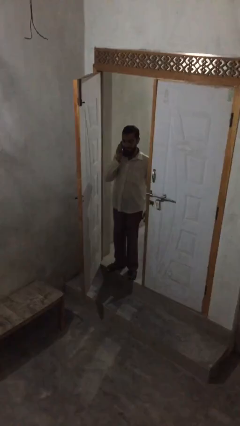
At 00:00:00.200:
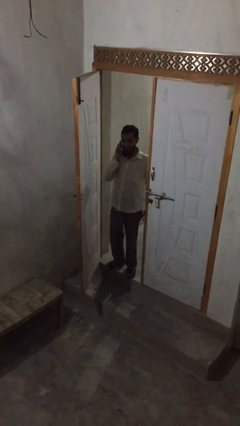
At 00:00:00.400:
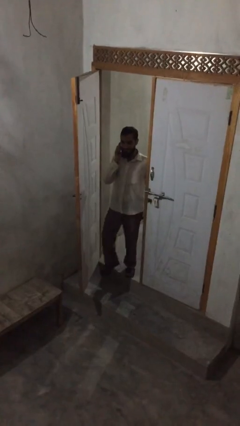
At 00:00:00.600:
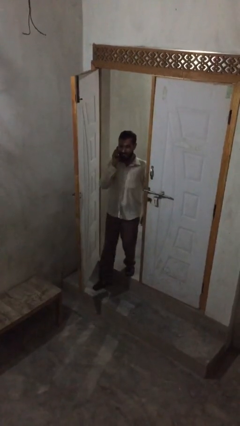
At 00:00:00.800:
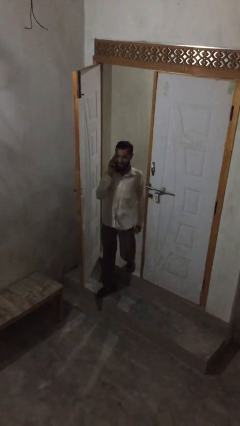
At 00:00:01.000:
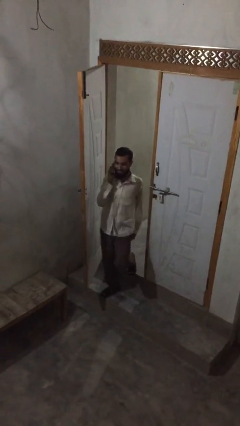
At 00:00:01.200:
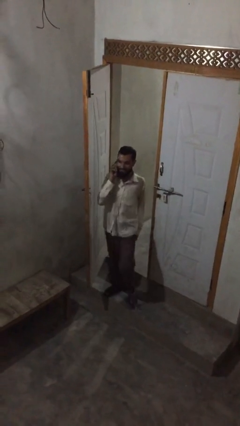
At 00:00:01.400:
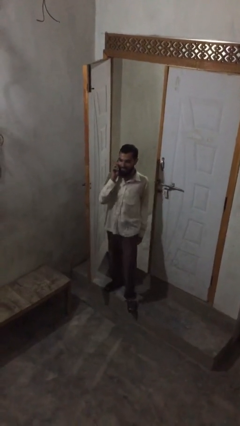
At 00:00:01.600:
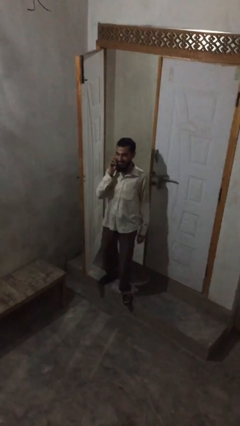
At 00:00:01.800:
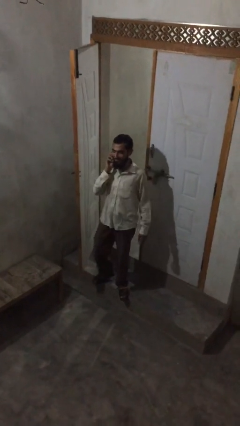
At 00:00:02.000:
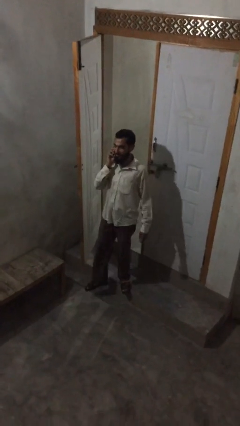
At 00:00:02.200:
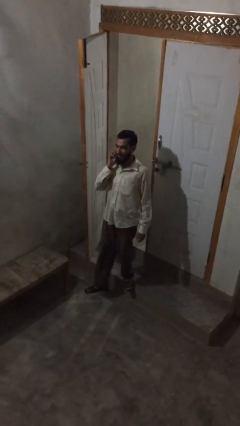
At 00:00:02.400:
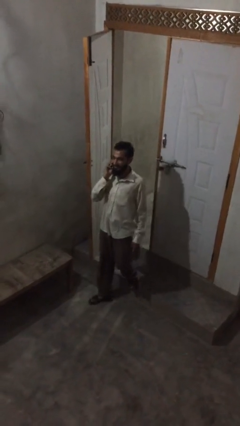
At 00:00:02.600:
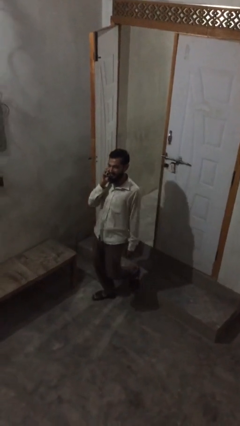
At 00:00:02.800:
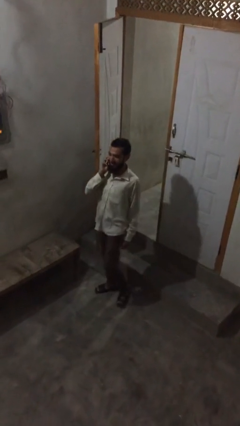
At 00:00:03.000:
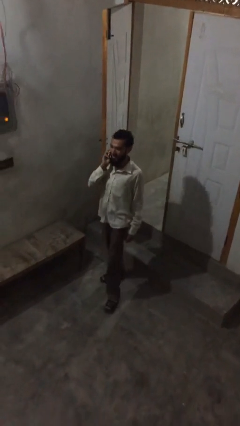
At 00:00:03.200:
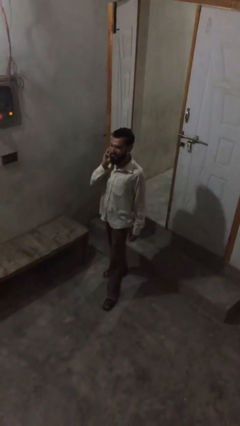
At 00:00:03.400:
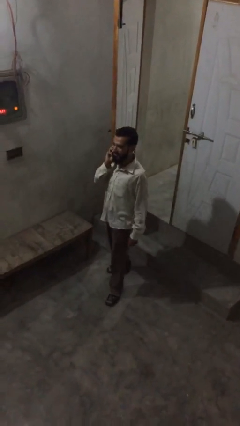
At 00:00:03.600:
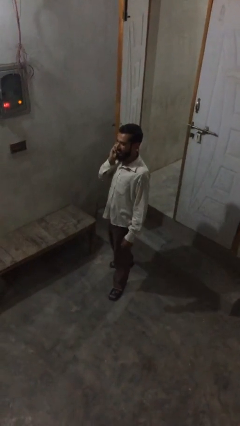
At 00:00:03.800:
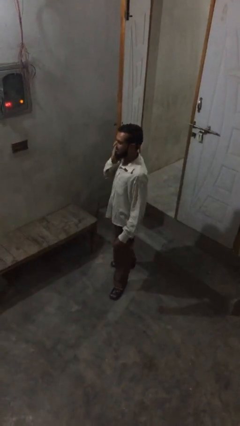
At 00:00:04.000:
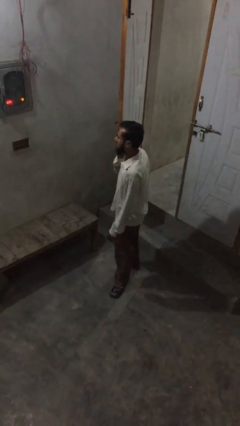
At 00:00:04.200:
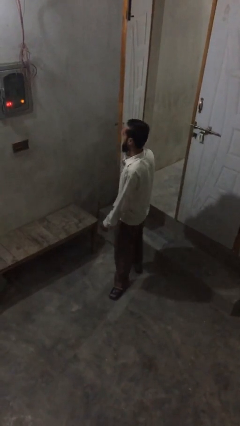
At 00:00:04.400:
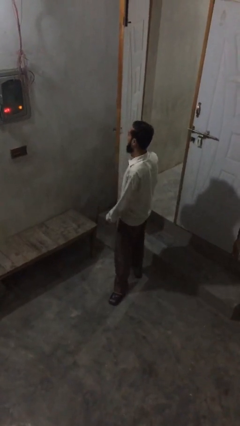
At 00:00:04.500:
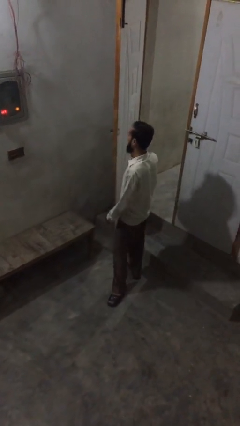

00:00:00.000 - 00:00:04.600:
person enters scene through structure

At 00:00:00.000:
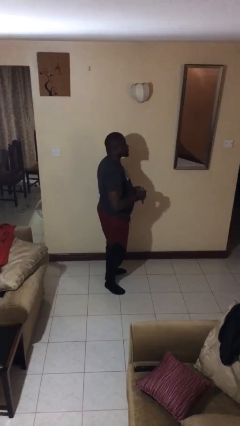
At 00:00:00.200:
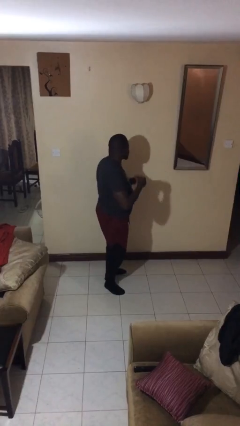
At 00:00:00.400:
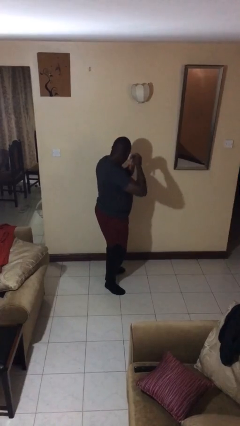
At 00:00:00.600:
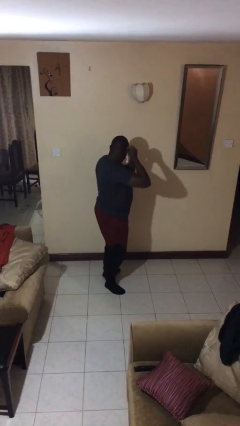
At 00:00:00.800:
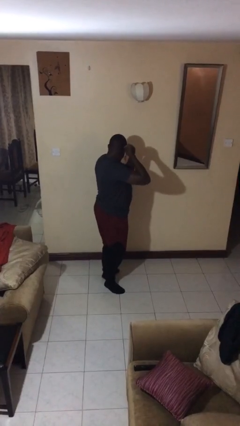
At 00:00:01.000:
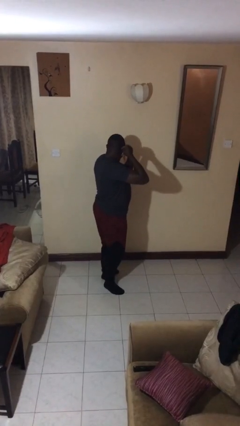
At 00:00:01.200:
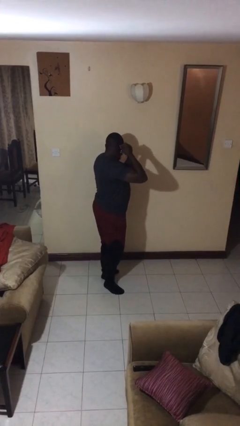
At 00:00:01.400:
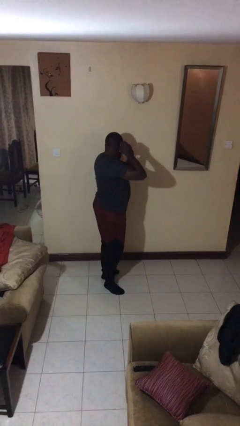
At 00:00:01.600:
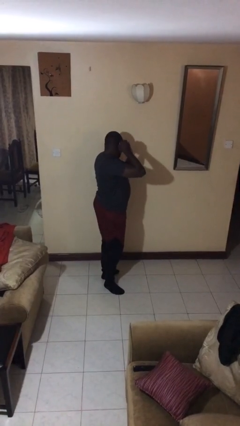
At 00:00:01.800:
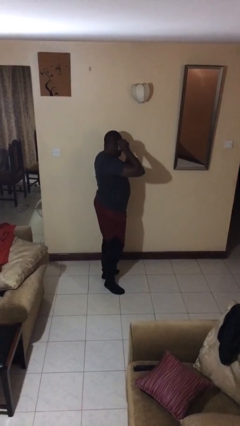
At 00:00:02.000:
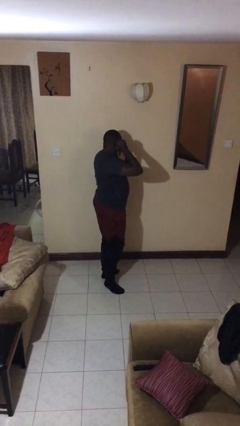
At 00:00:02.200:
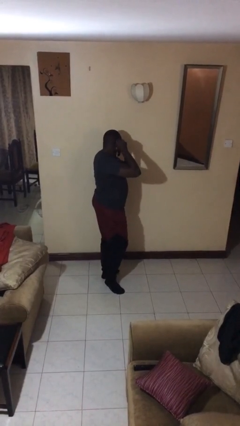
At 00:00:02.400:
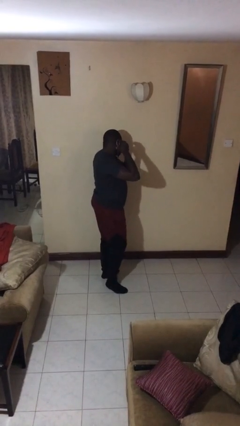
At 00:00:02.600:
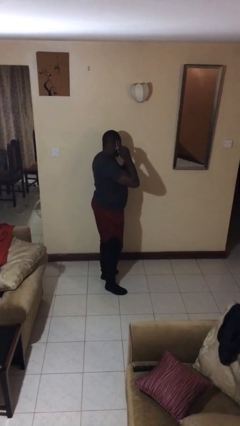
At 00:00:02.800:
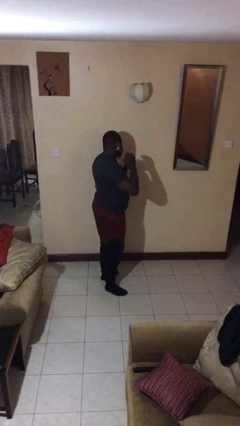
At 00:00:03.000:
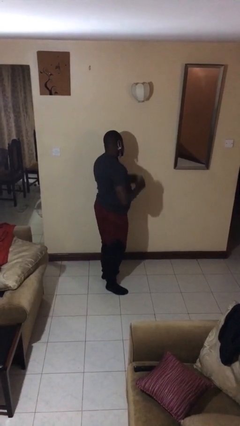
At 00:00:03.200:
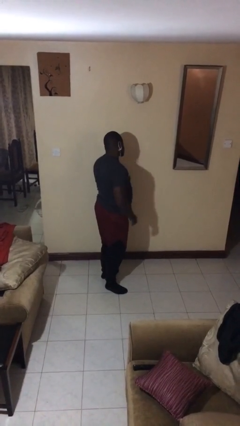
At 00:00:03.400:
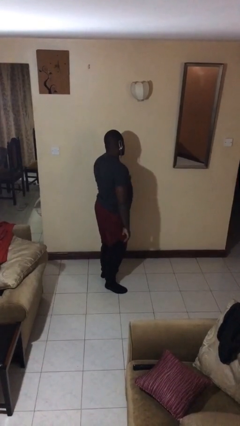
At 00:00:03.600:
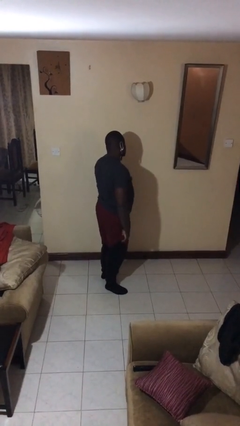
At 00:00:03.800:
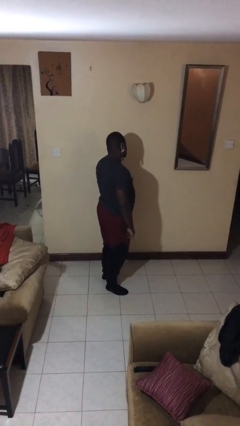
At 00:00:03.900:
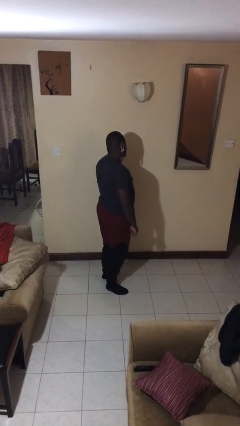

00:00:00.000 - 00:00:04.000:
person puts on earrings

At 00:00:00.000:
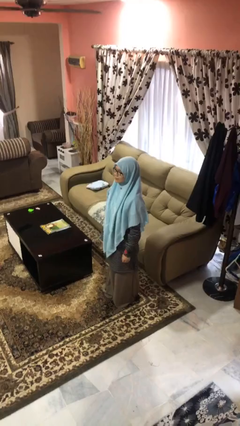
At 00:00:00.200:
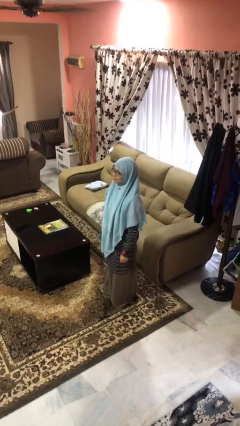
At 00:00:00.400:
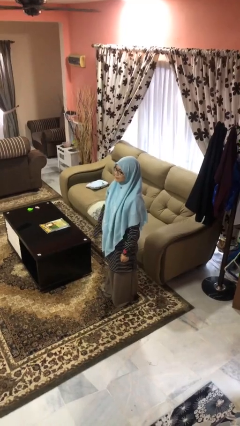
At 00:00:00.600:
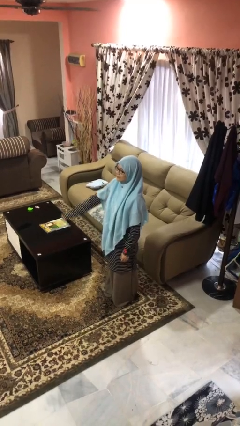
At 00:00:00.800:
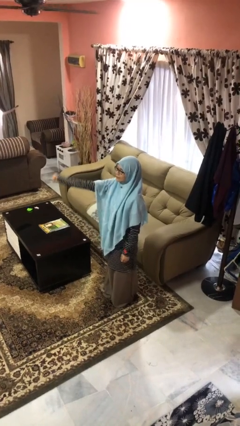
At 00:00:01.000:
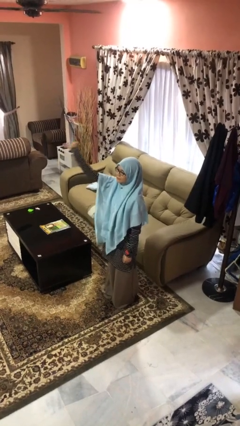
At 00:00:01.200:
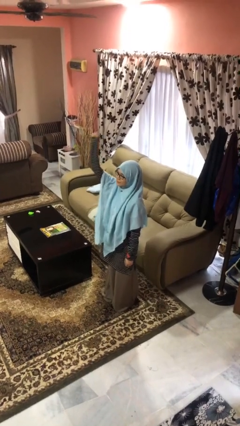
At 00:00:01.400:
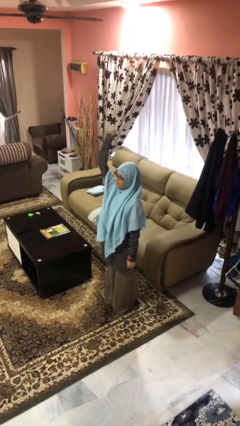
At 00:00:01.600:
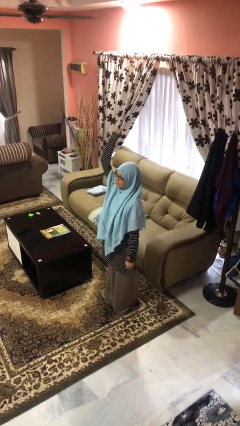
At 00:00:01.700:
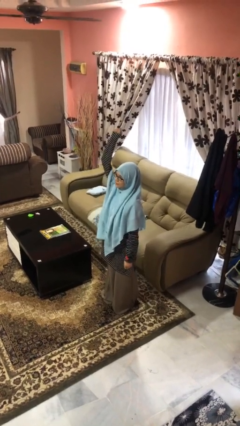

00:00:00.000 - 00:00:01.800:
person gestures raise hand

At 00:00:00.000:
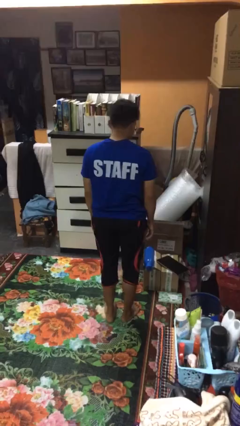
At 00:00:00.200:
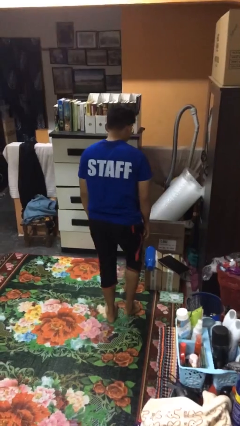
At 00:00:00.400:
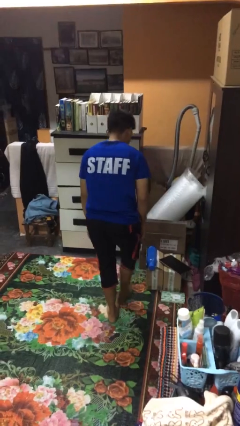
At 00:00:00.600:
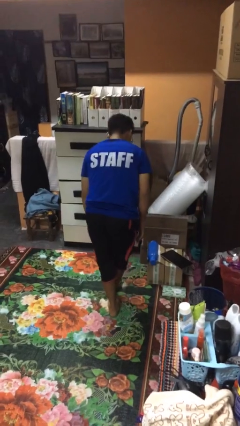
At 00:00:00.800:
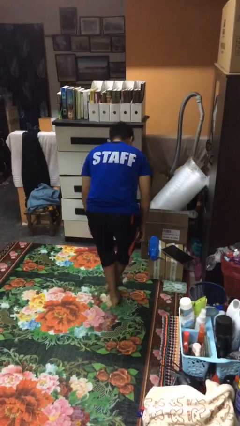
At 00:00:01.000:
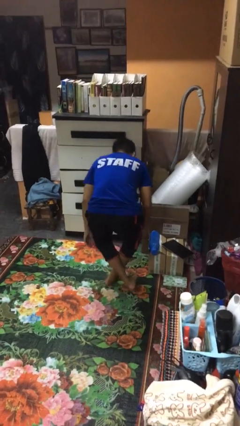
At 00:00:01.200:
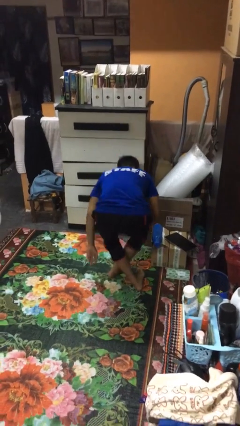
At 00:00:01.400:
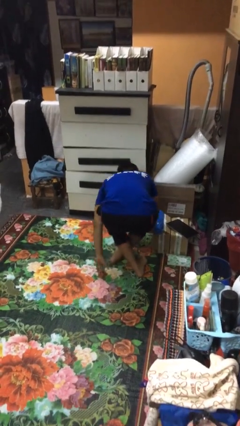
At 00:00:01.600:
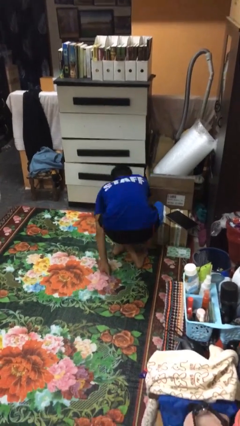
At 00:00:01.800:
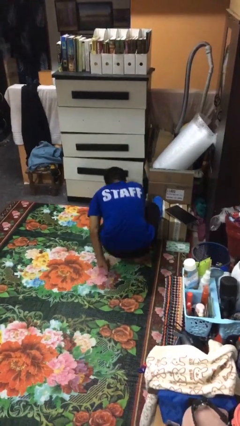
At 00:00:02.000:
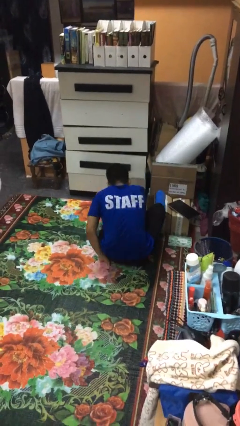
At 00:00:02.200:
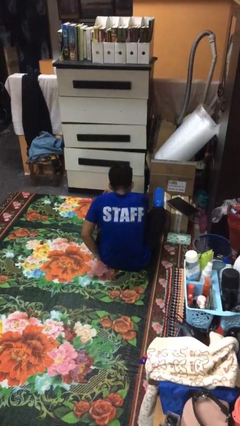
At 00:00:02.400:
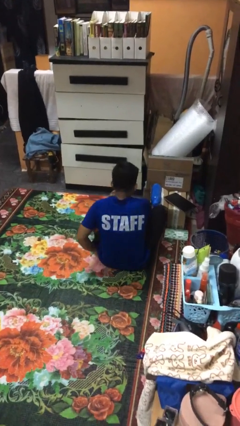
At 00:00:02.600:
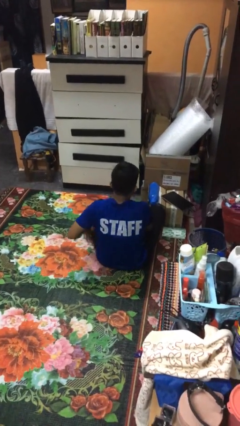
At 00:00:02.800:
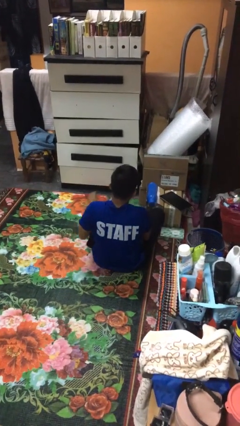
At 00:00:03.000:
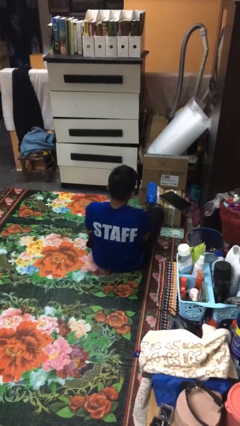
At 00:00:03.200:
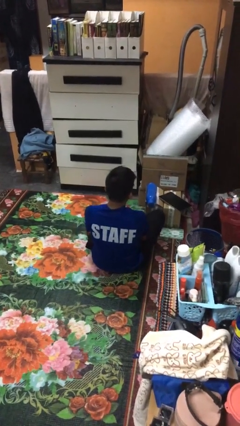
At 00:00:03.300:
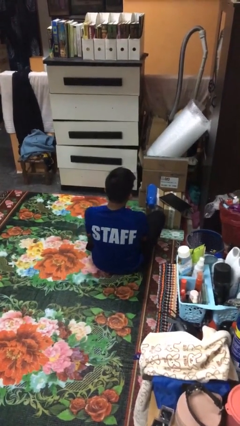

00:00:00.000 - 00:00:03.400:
person sits crisscross

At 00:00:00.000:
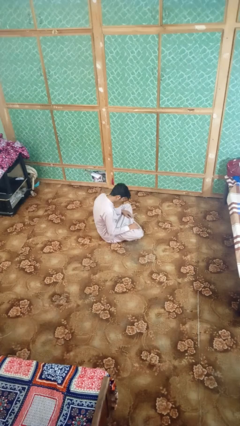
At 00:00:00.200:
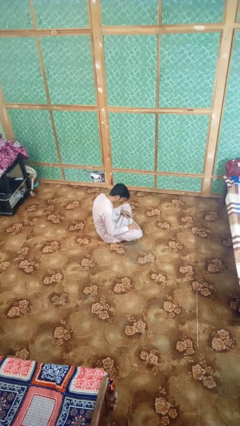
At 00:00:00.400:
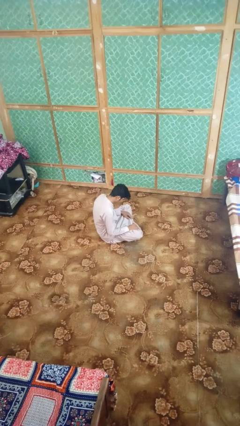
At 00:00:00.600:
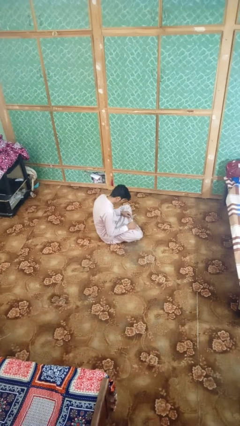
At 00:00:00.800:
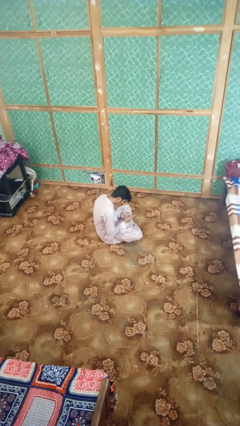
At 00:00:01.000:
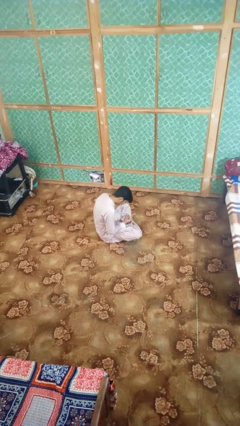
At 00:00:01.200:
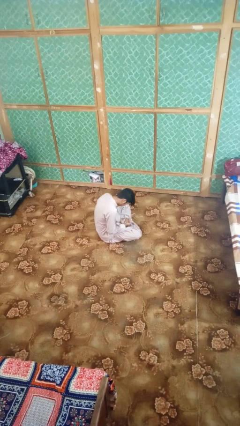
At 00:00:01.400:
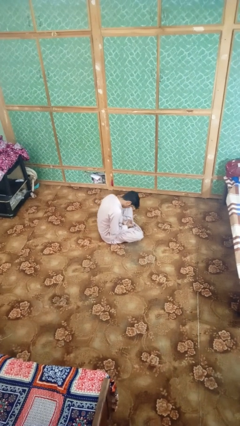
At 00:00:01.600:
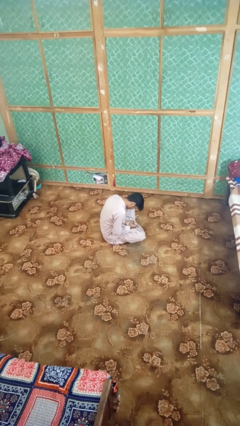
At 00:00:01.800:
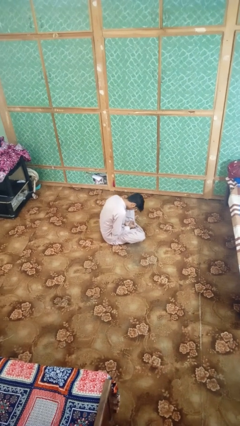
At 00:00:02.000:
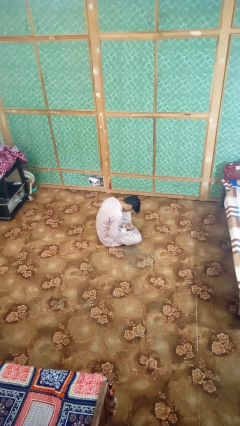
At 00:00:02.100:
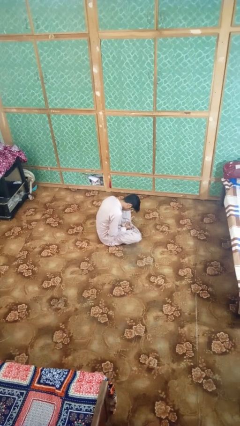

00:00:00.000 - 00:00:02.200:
person looks at hands in lap

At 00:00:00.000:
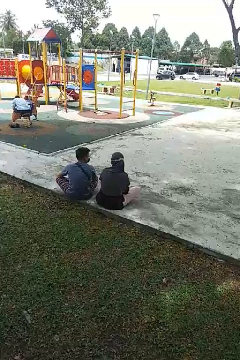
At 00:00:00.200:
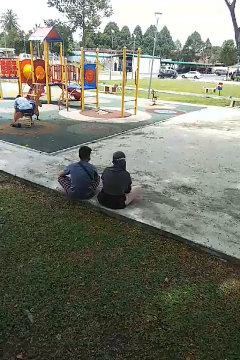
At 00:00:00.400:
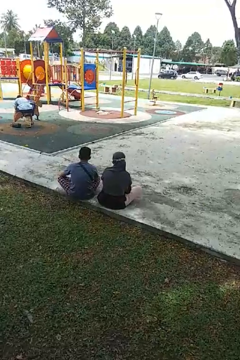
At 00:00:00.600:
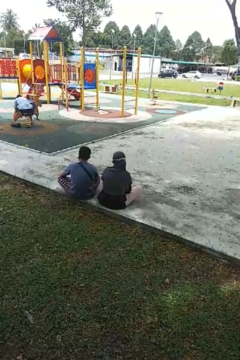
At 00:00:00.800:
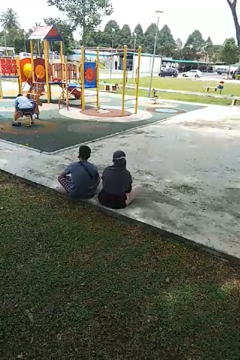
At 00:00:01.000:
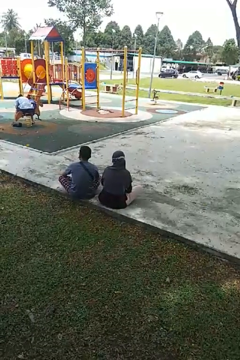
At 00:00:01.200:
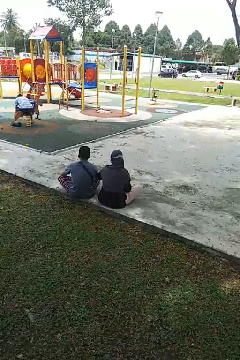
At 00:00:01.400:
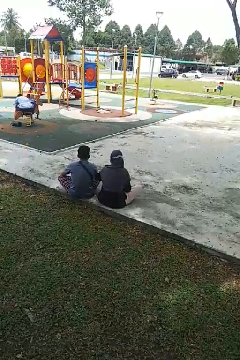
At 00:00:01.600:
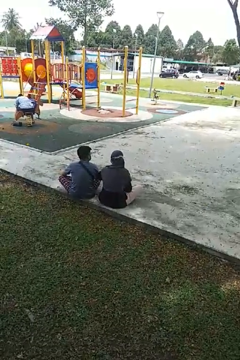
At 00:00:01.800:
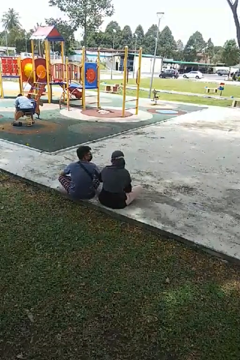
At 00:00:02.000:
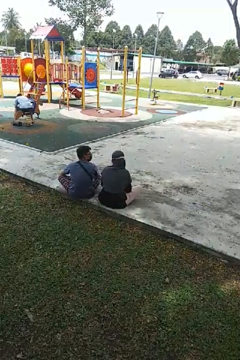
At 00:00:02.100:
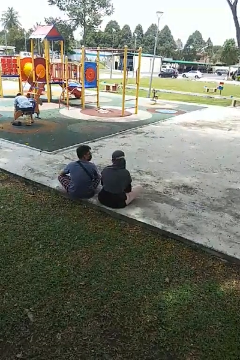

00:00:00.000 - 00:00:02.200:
person nudges person with elbow
